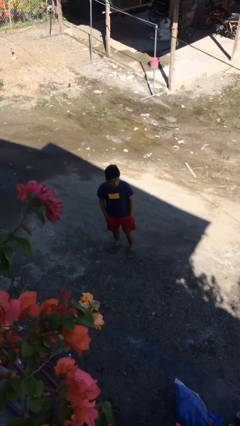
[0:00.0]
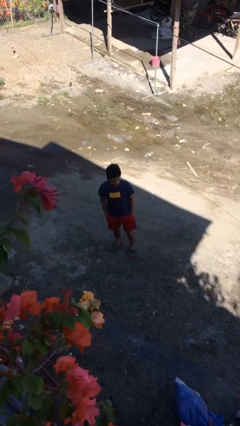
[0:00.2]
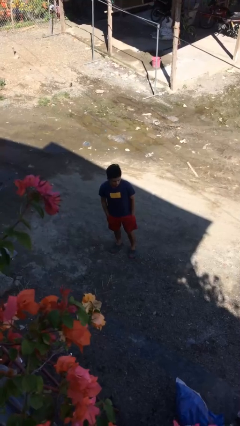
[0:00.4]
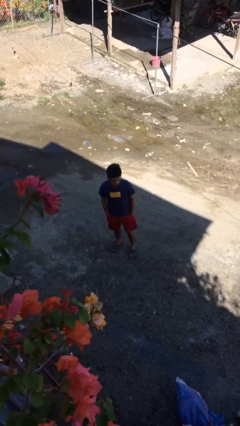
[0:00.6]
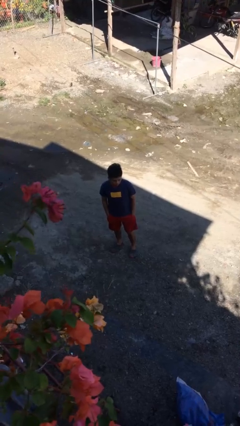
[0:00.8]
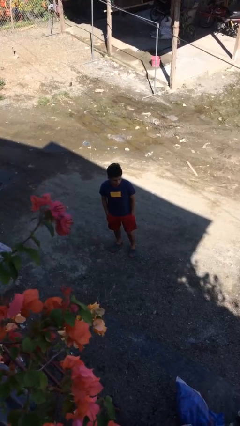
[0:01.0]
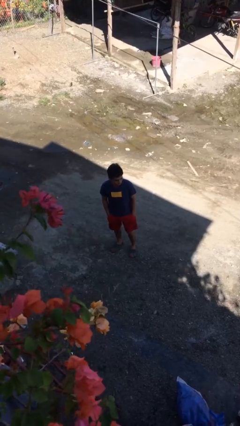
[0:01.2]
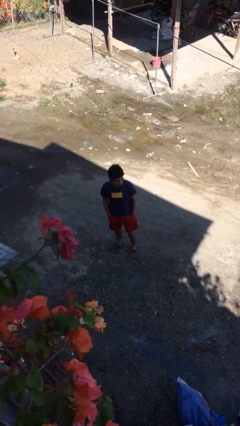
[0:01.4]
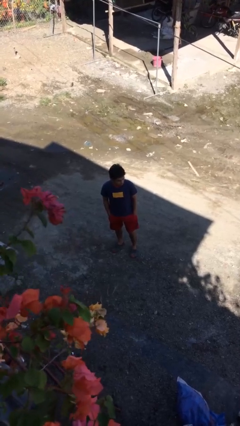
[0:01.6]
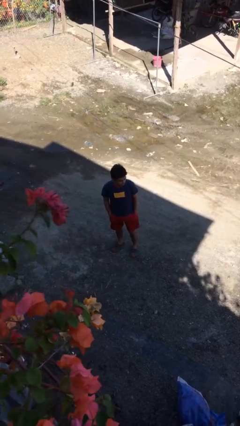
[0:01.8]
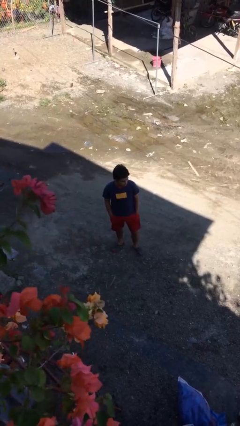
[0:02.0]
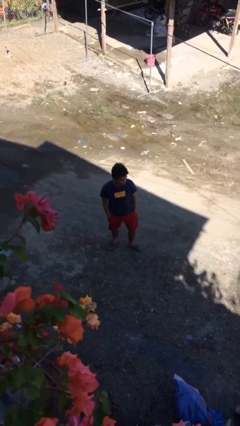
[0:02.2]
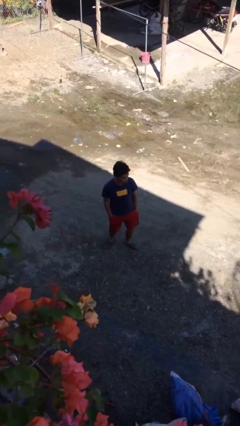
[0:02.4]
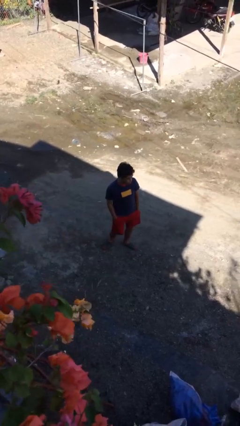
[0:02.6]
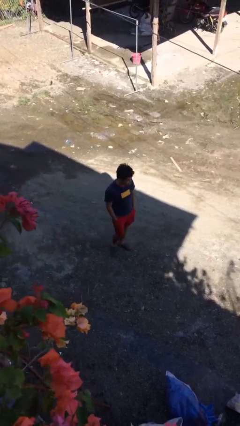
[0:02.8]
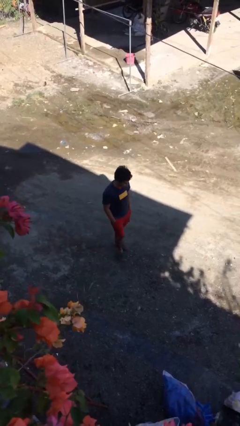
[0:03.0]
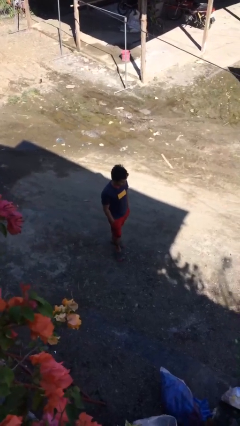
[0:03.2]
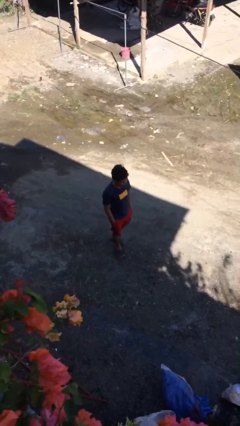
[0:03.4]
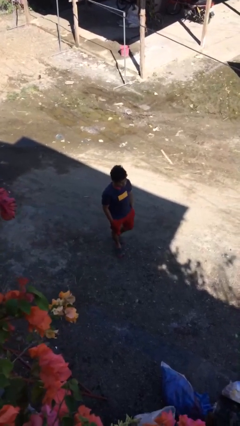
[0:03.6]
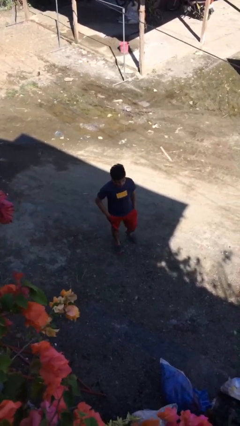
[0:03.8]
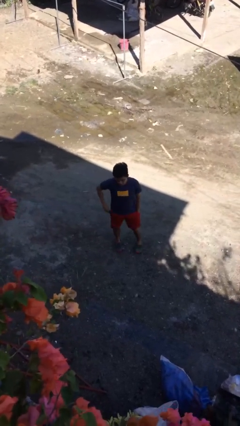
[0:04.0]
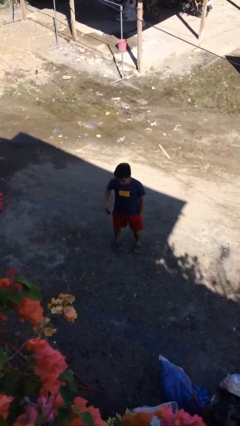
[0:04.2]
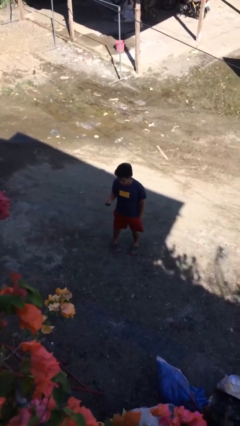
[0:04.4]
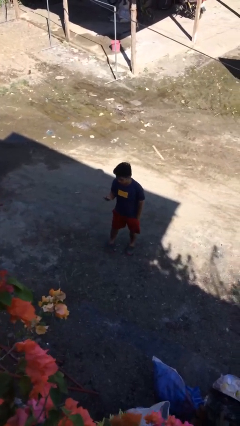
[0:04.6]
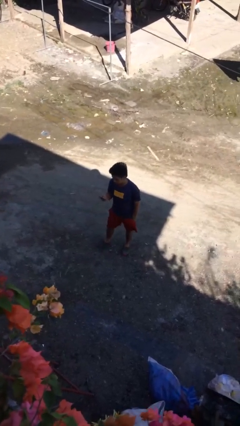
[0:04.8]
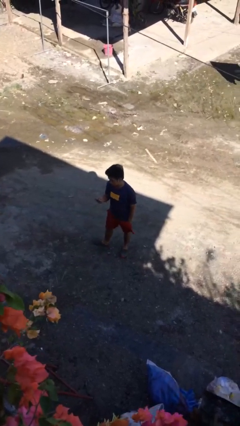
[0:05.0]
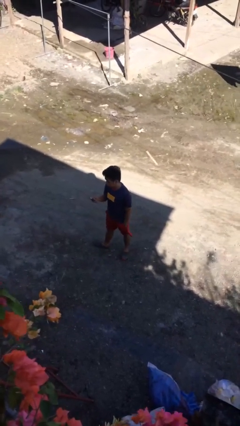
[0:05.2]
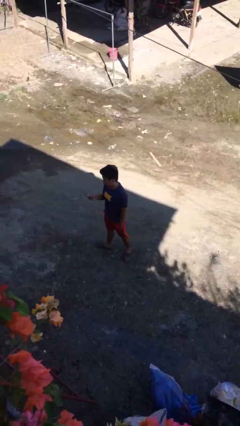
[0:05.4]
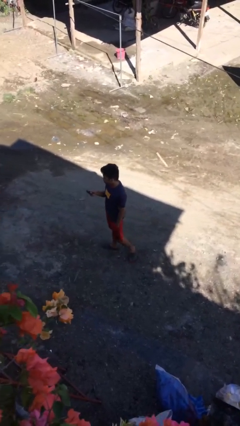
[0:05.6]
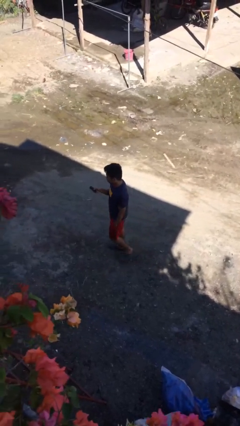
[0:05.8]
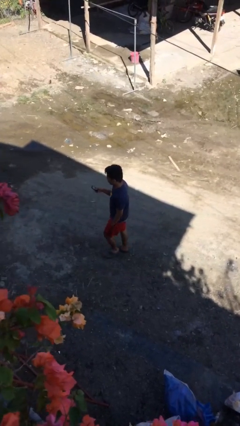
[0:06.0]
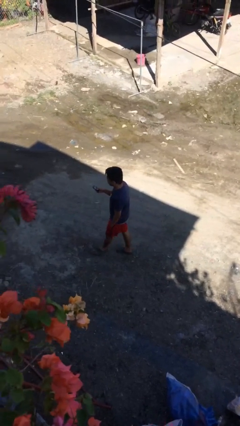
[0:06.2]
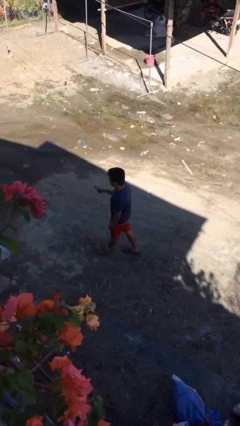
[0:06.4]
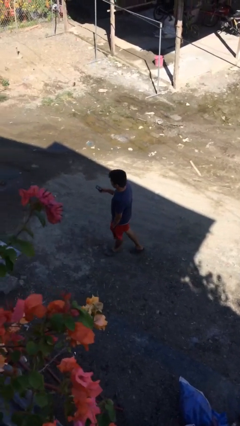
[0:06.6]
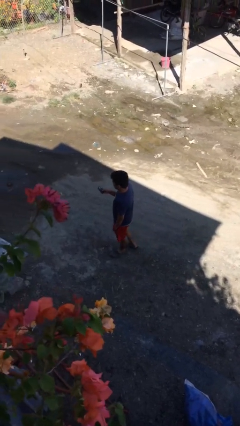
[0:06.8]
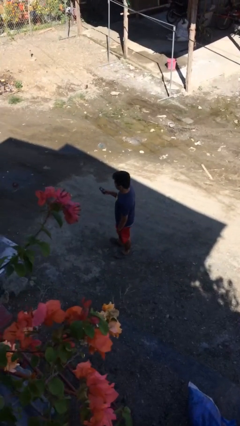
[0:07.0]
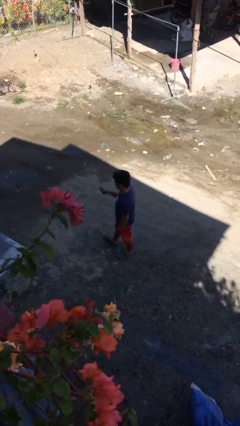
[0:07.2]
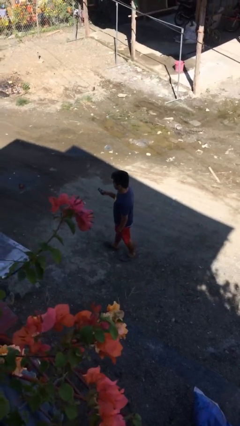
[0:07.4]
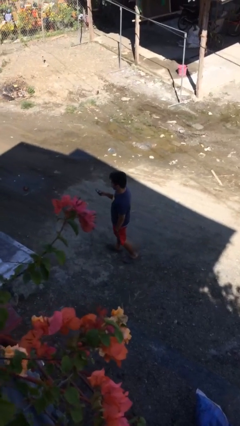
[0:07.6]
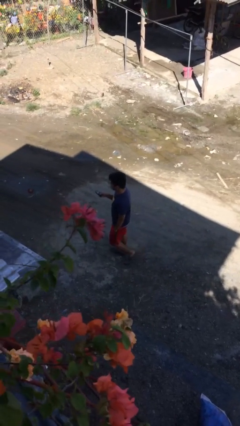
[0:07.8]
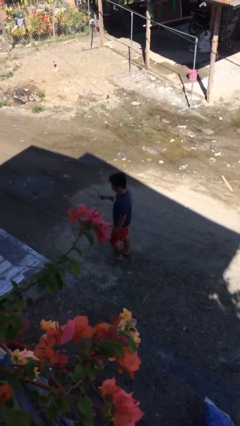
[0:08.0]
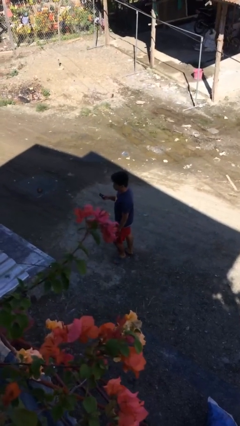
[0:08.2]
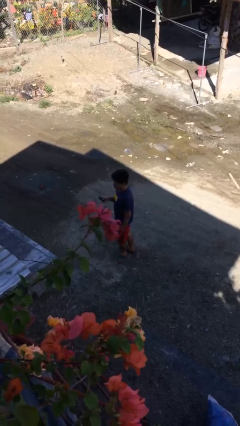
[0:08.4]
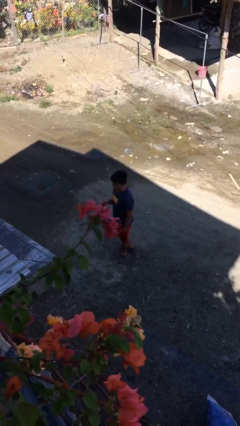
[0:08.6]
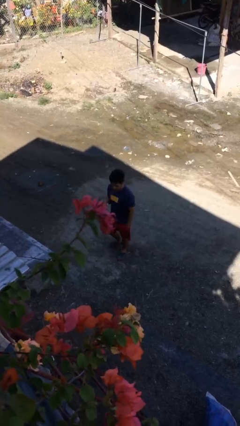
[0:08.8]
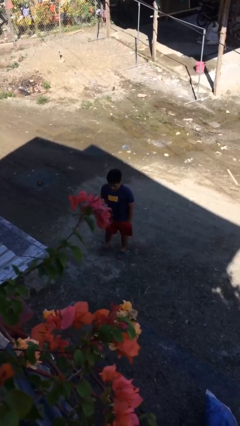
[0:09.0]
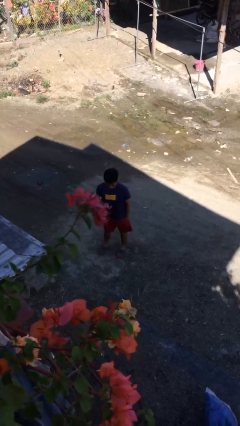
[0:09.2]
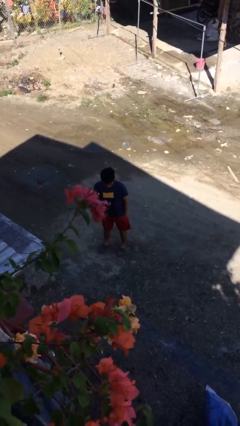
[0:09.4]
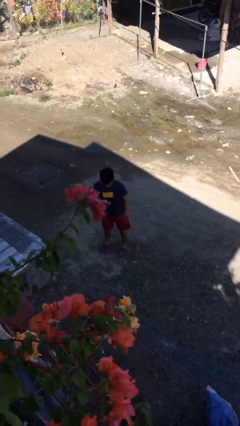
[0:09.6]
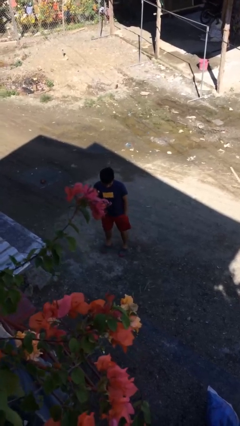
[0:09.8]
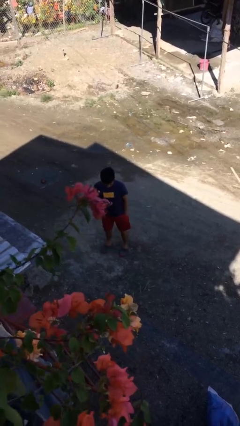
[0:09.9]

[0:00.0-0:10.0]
person walks

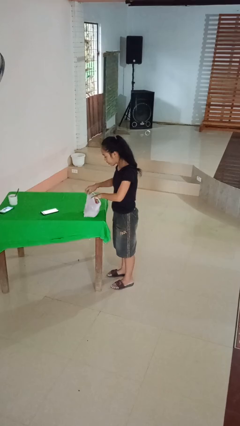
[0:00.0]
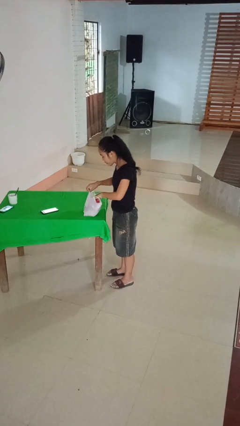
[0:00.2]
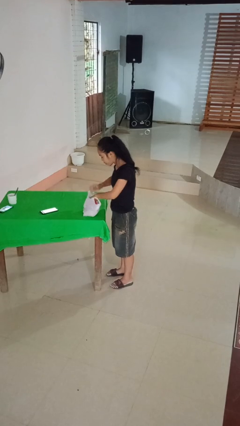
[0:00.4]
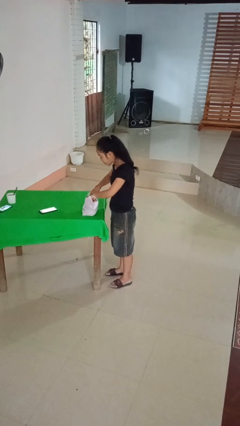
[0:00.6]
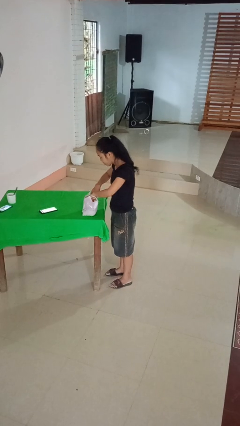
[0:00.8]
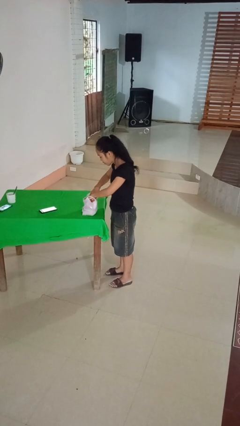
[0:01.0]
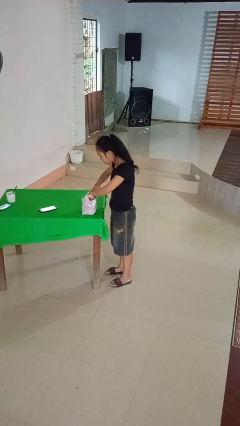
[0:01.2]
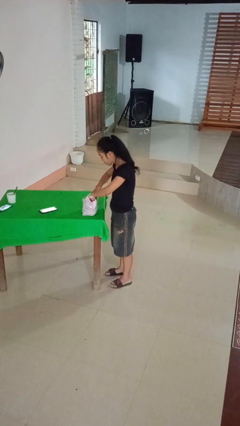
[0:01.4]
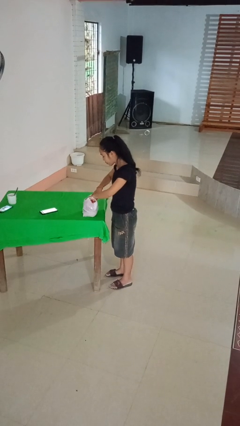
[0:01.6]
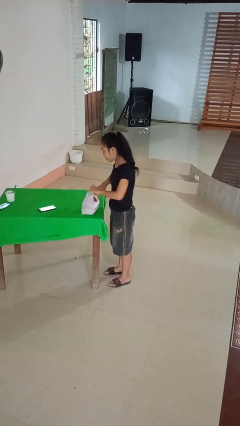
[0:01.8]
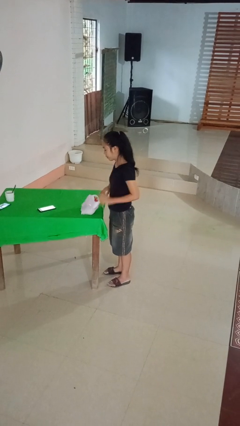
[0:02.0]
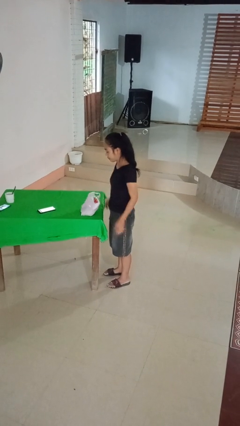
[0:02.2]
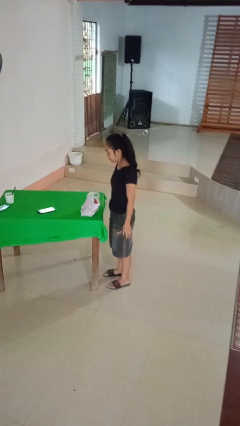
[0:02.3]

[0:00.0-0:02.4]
person searches in bag

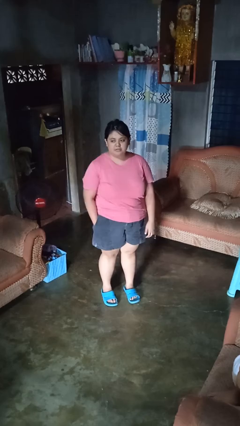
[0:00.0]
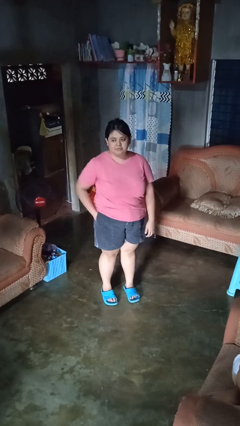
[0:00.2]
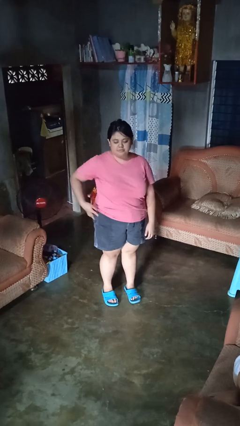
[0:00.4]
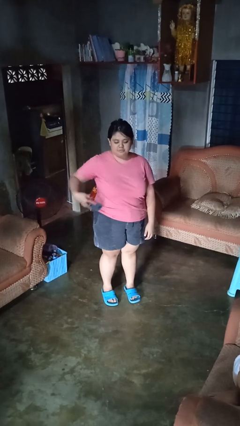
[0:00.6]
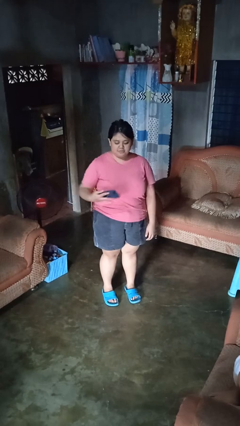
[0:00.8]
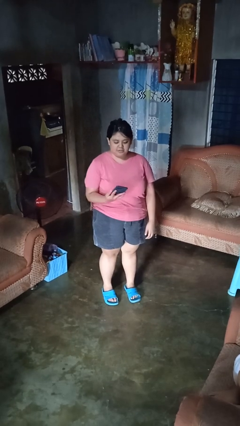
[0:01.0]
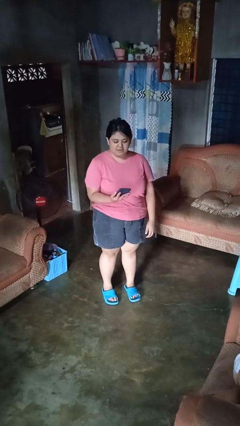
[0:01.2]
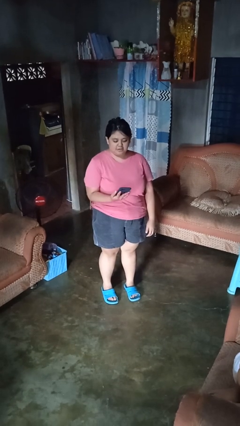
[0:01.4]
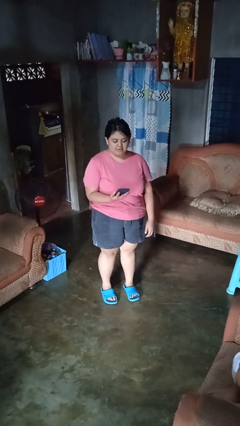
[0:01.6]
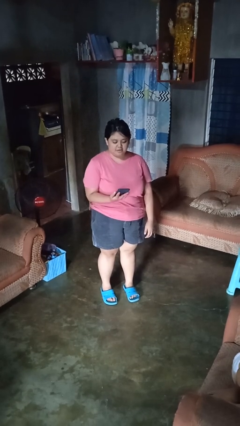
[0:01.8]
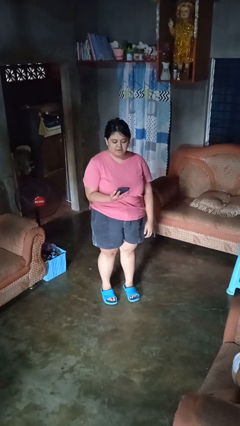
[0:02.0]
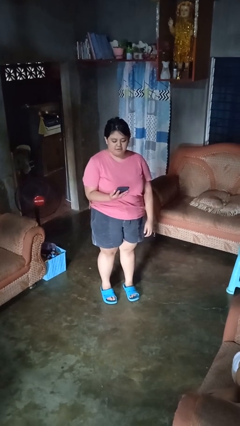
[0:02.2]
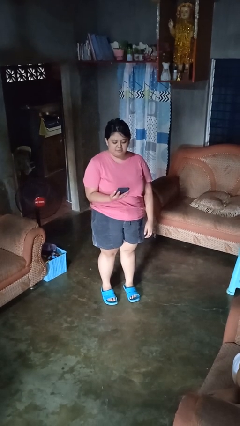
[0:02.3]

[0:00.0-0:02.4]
person takes phone from pocket

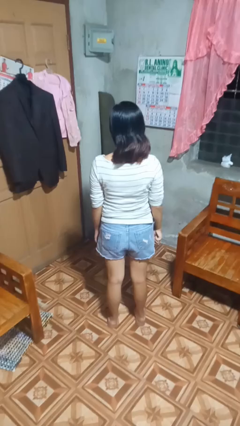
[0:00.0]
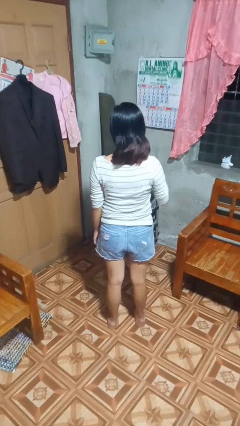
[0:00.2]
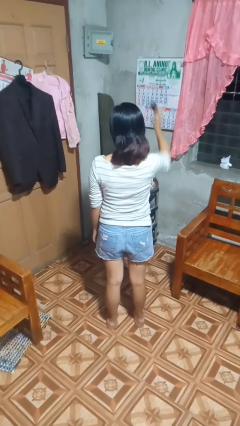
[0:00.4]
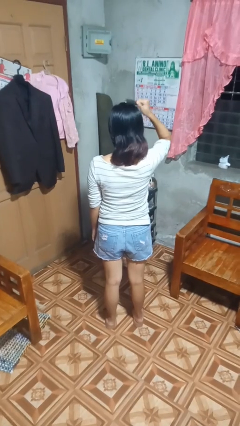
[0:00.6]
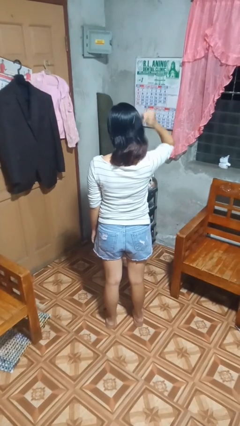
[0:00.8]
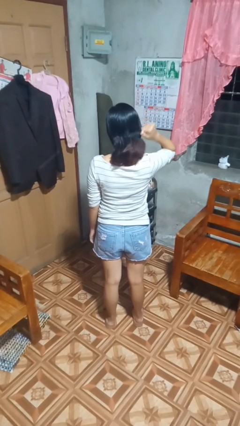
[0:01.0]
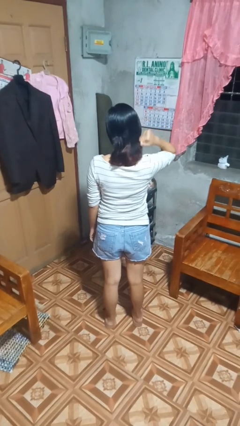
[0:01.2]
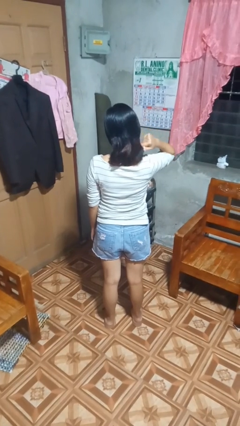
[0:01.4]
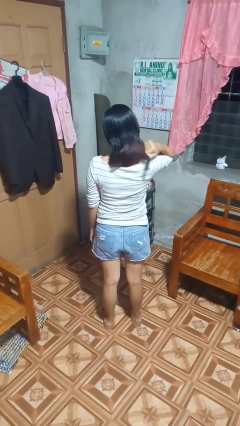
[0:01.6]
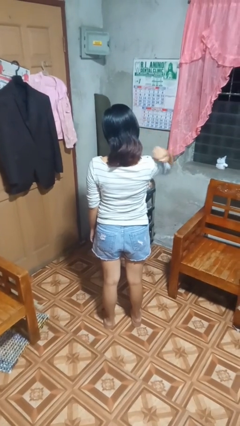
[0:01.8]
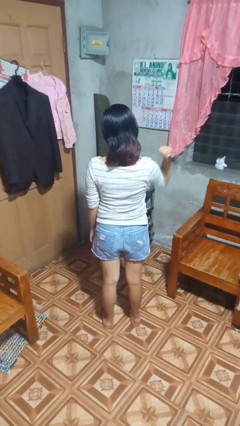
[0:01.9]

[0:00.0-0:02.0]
person brushes hair

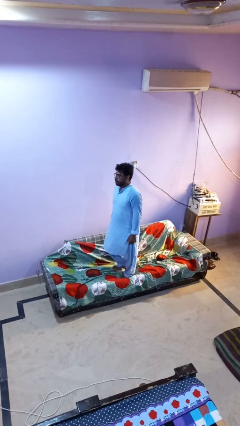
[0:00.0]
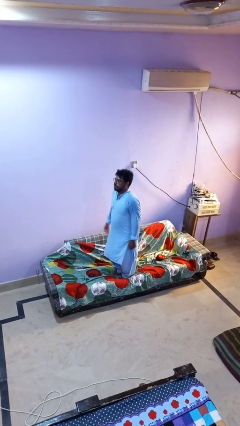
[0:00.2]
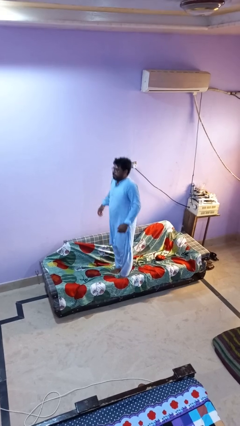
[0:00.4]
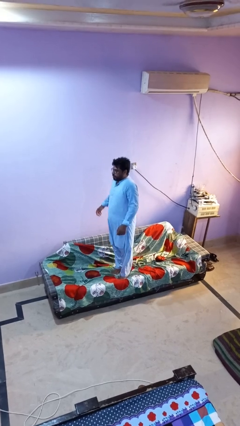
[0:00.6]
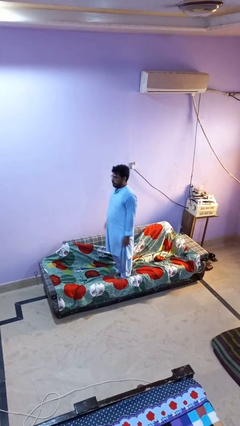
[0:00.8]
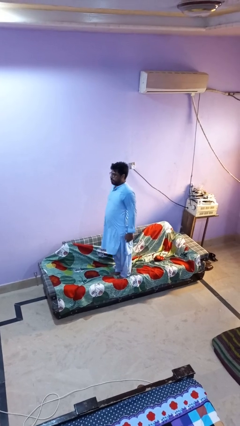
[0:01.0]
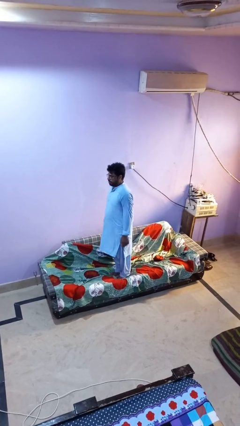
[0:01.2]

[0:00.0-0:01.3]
person jumps on couch
